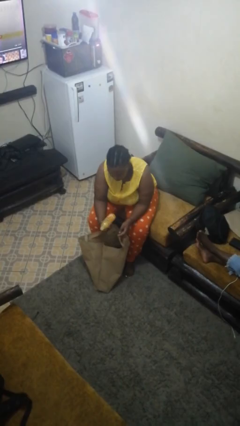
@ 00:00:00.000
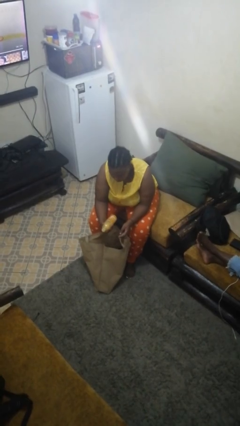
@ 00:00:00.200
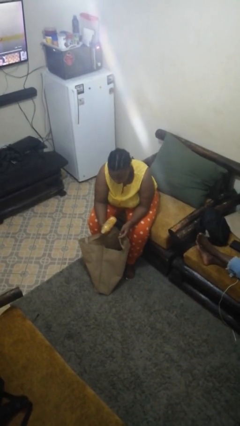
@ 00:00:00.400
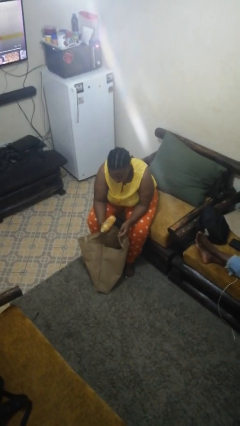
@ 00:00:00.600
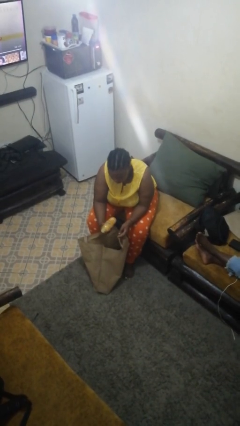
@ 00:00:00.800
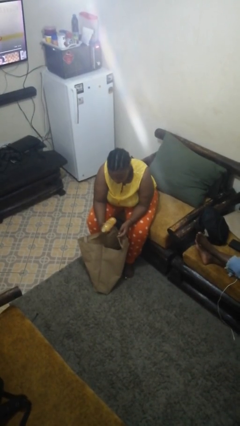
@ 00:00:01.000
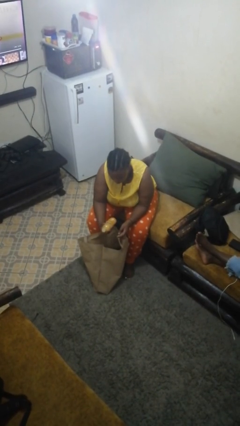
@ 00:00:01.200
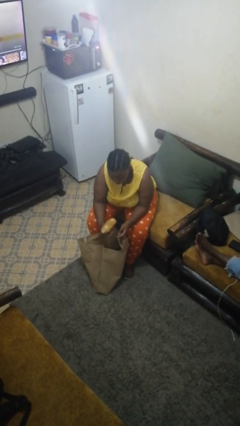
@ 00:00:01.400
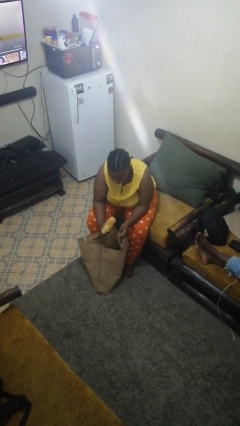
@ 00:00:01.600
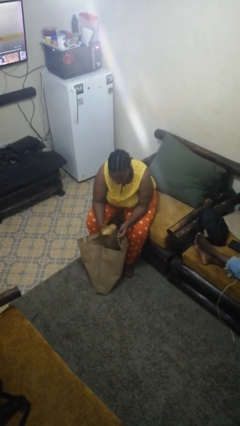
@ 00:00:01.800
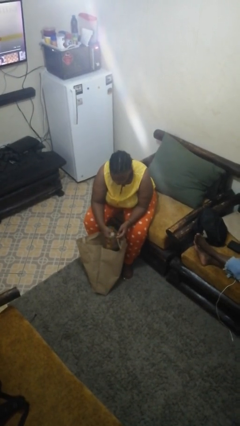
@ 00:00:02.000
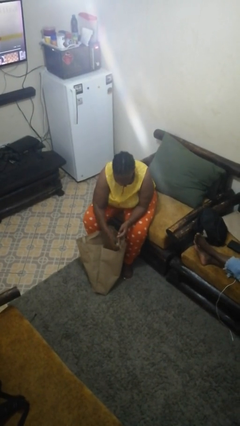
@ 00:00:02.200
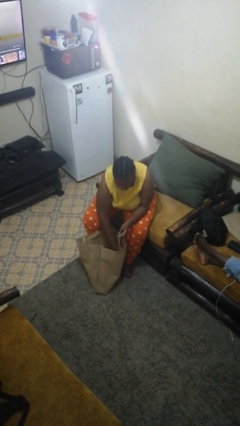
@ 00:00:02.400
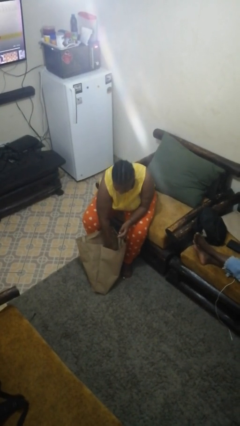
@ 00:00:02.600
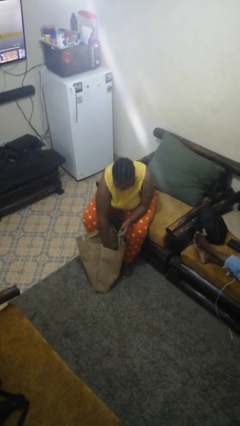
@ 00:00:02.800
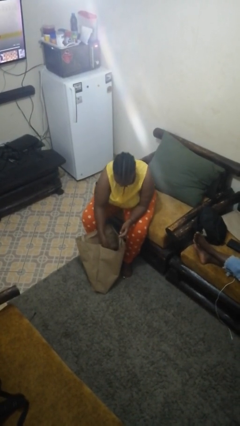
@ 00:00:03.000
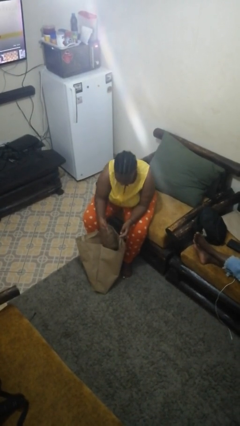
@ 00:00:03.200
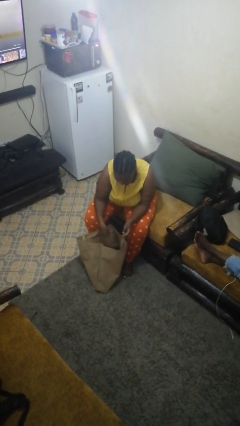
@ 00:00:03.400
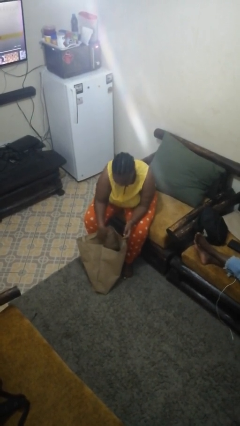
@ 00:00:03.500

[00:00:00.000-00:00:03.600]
person puts object into bag

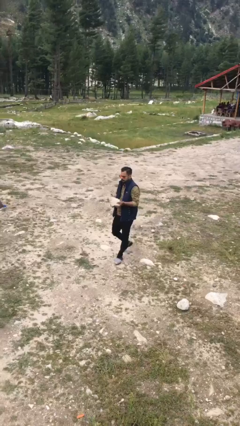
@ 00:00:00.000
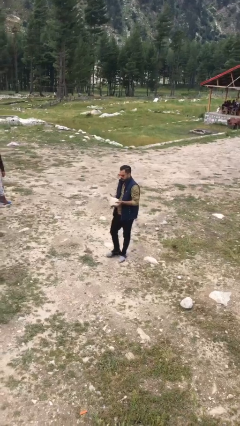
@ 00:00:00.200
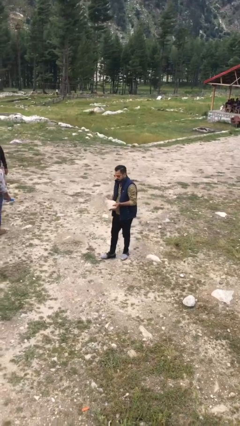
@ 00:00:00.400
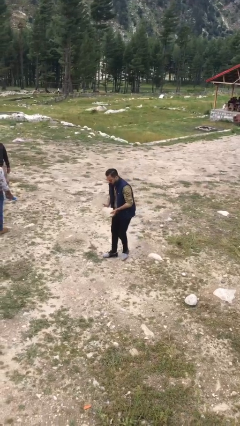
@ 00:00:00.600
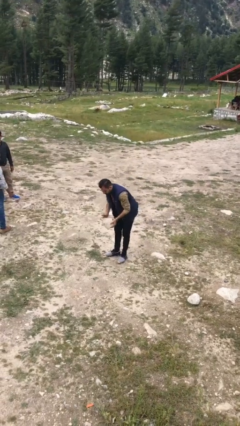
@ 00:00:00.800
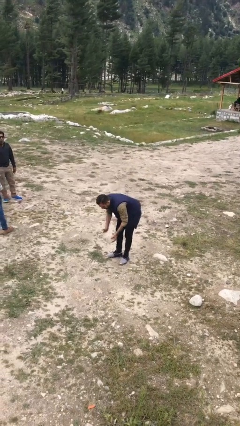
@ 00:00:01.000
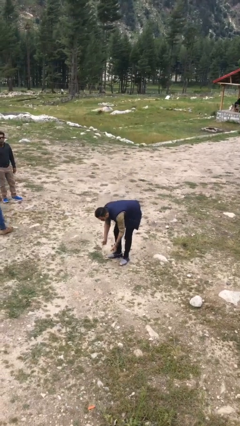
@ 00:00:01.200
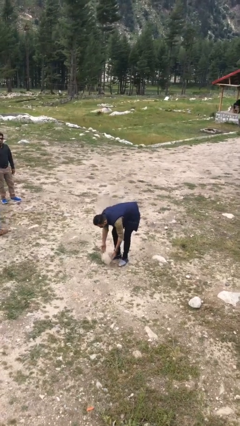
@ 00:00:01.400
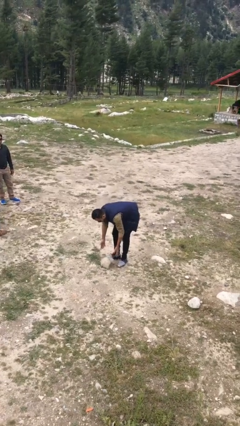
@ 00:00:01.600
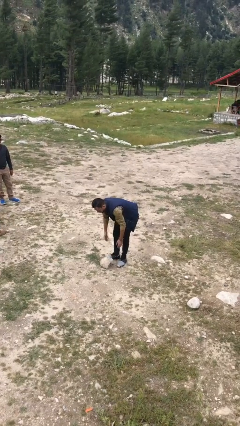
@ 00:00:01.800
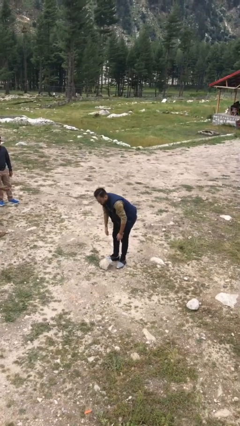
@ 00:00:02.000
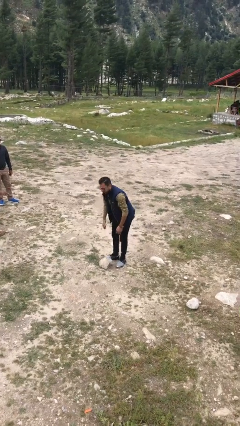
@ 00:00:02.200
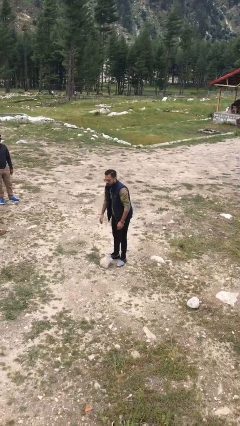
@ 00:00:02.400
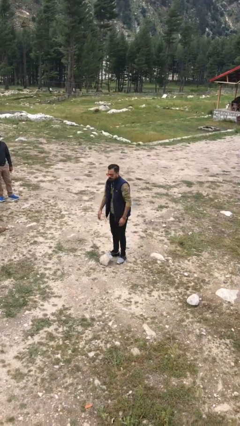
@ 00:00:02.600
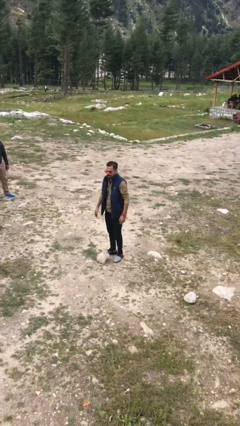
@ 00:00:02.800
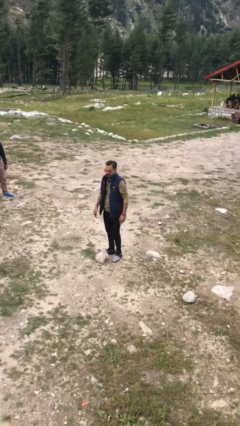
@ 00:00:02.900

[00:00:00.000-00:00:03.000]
person puts down object on floor

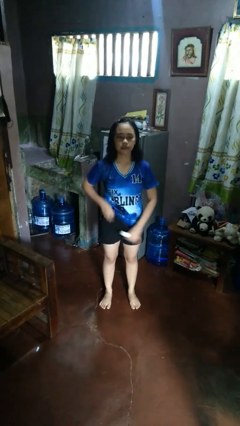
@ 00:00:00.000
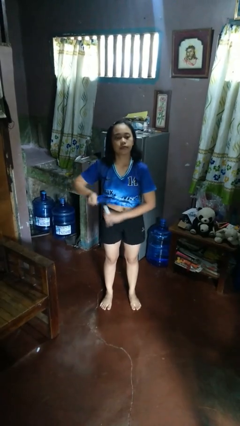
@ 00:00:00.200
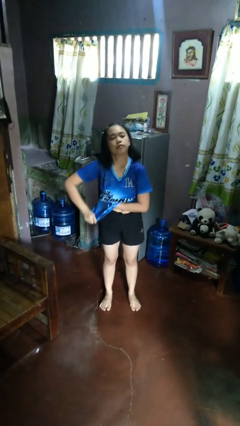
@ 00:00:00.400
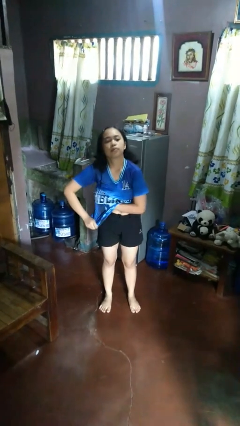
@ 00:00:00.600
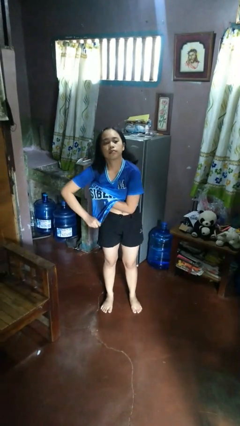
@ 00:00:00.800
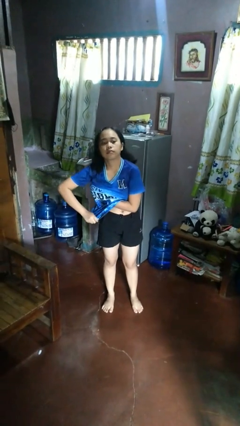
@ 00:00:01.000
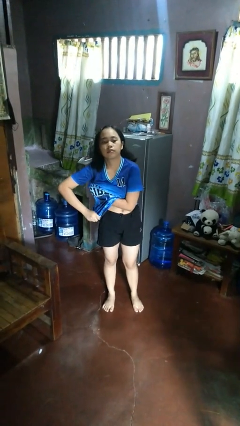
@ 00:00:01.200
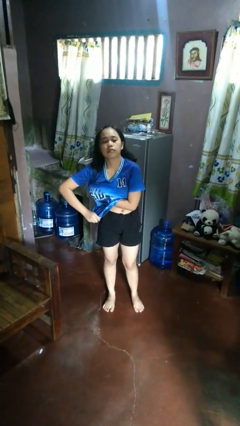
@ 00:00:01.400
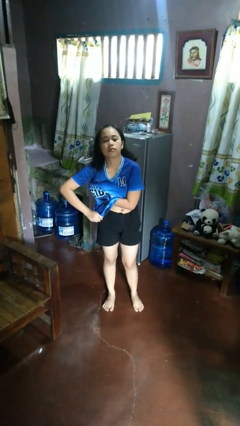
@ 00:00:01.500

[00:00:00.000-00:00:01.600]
person applies deodorant

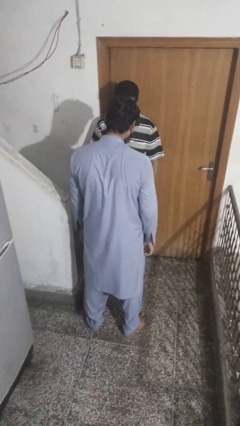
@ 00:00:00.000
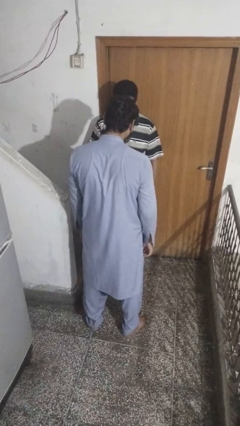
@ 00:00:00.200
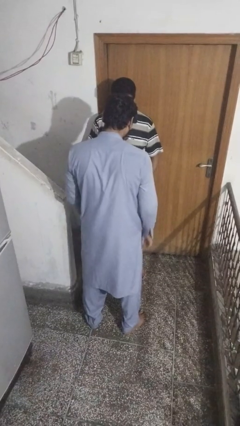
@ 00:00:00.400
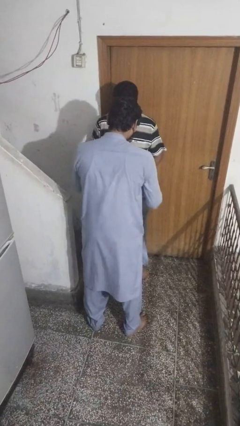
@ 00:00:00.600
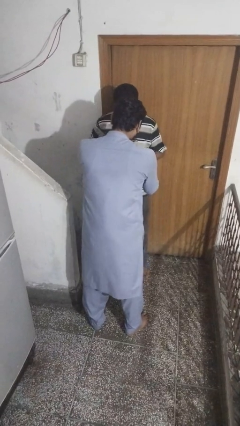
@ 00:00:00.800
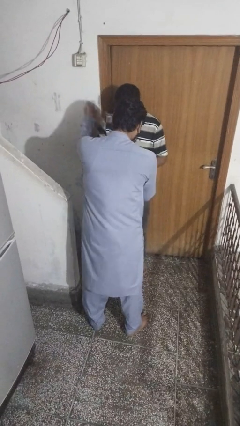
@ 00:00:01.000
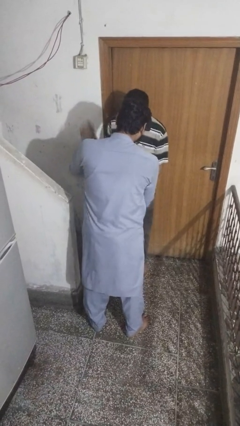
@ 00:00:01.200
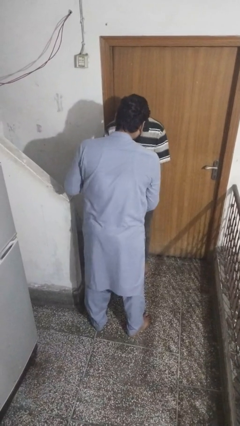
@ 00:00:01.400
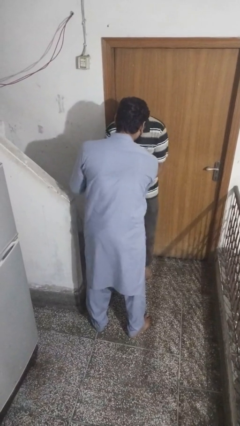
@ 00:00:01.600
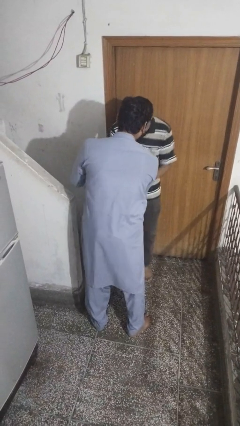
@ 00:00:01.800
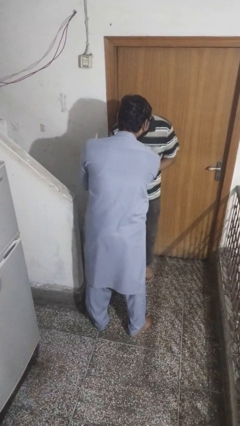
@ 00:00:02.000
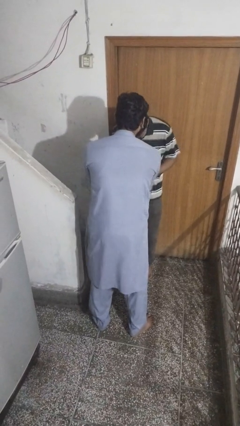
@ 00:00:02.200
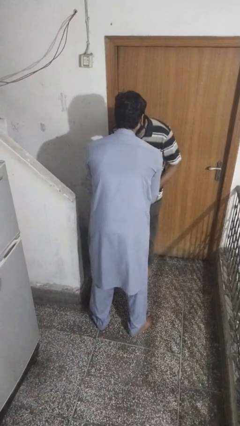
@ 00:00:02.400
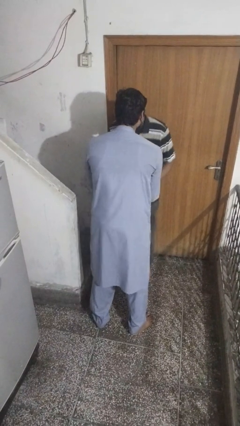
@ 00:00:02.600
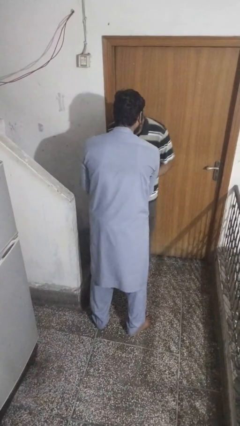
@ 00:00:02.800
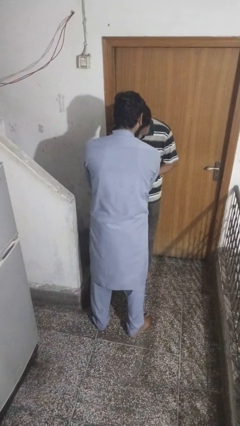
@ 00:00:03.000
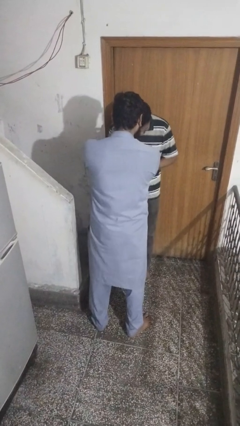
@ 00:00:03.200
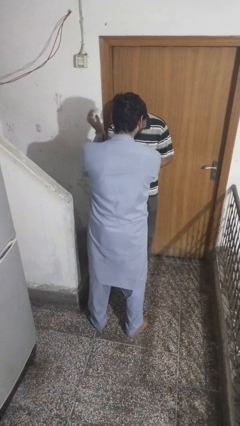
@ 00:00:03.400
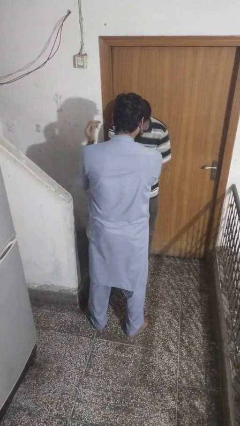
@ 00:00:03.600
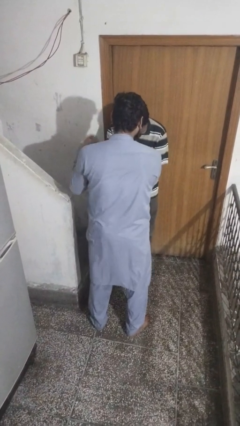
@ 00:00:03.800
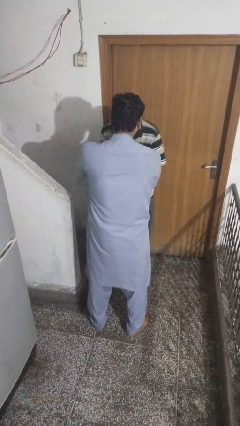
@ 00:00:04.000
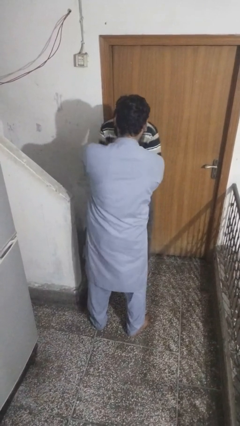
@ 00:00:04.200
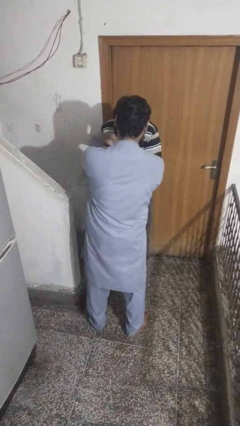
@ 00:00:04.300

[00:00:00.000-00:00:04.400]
person tickles person

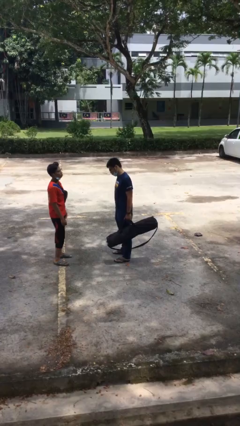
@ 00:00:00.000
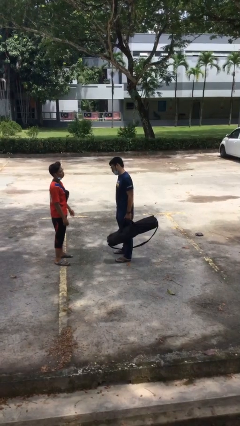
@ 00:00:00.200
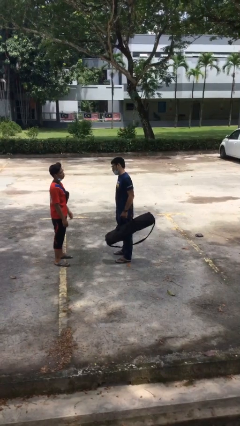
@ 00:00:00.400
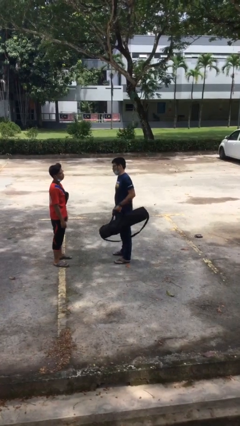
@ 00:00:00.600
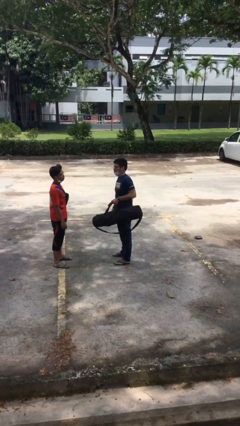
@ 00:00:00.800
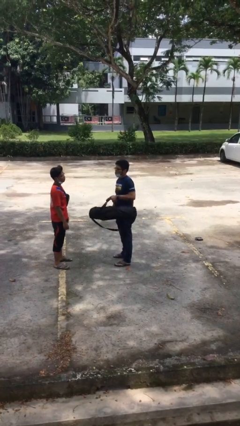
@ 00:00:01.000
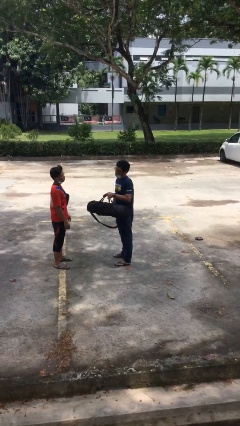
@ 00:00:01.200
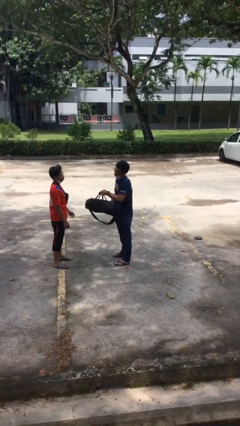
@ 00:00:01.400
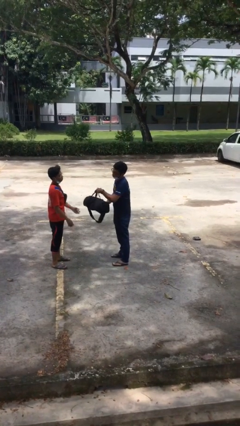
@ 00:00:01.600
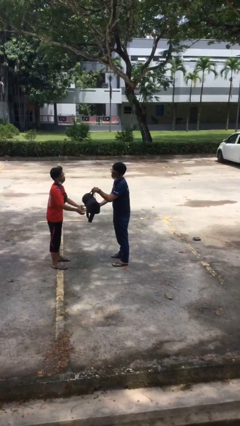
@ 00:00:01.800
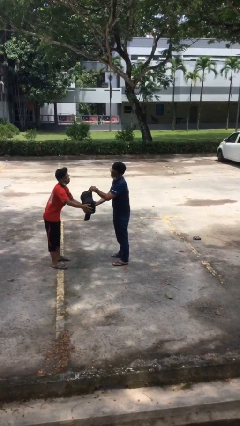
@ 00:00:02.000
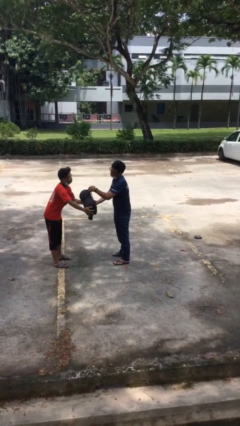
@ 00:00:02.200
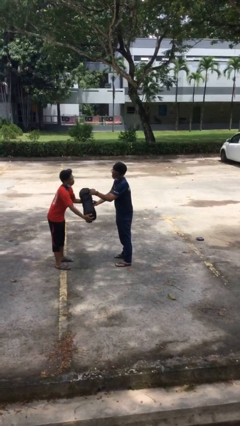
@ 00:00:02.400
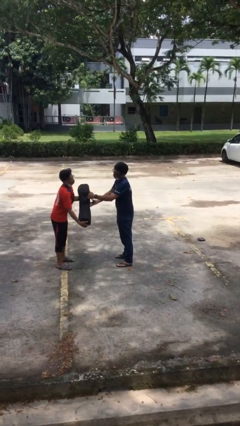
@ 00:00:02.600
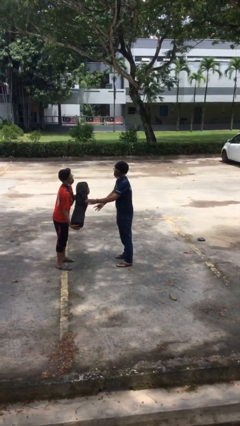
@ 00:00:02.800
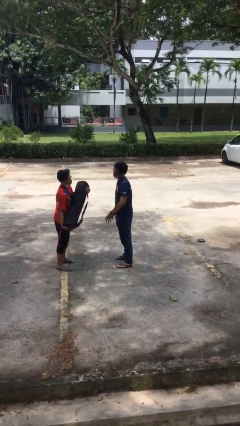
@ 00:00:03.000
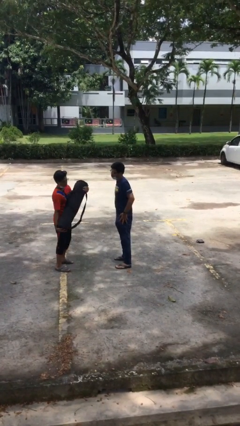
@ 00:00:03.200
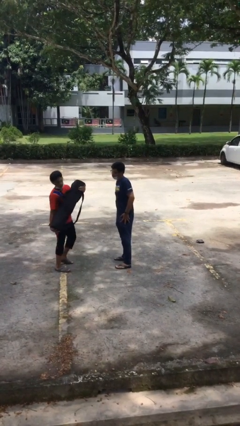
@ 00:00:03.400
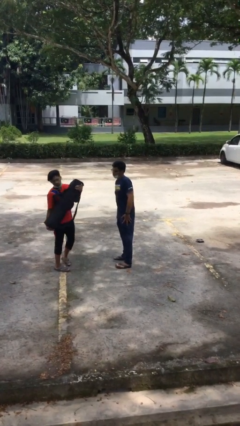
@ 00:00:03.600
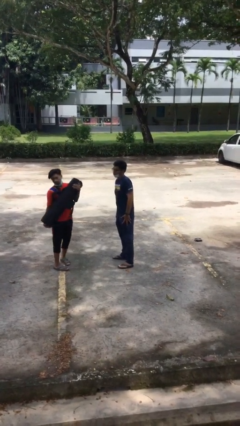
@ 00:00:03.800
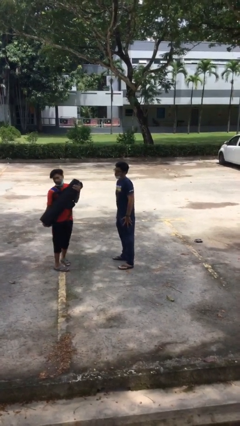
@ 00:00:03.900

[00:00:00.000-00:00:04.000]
person transfers object to person

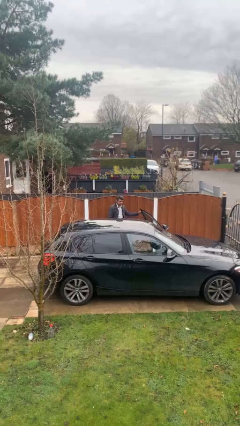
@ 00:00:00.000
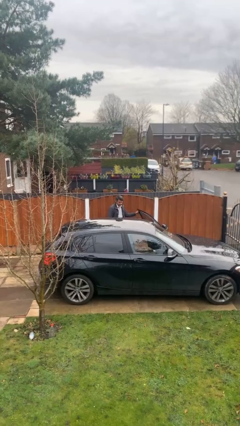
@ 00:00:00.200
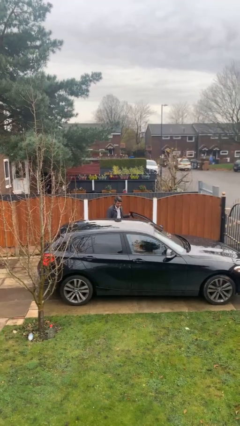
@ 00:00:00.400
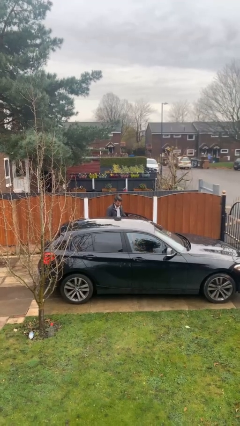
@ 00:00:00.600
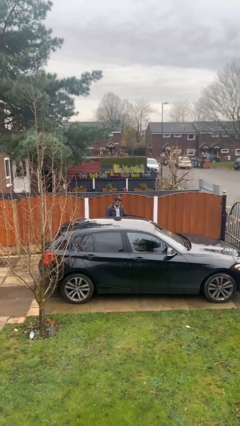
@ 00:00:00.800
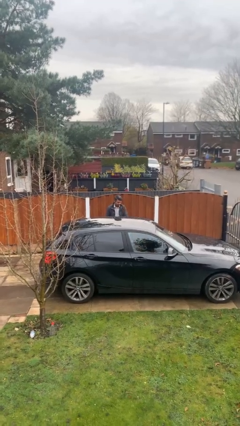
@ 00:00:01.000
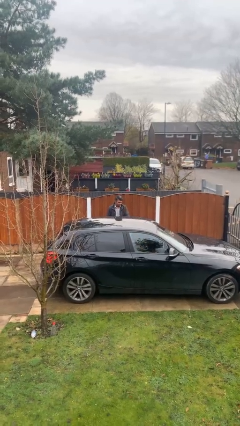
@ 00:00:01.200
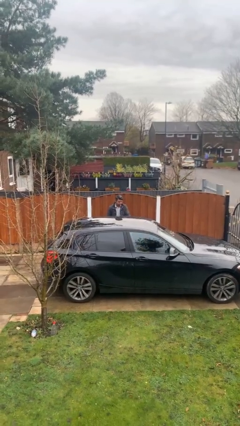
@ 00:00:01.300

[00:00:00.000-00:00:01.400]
person closes car door
